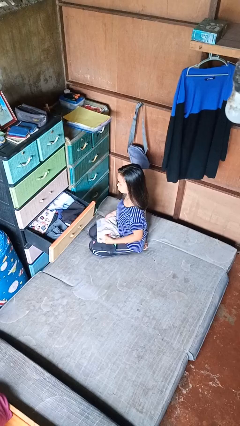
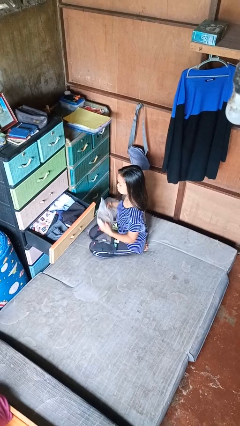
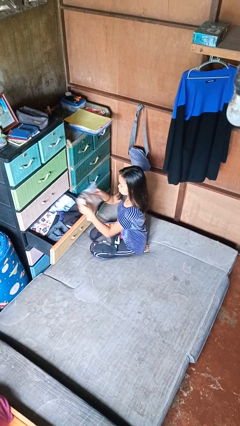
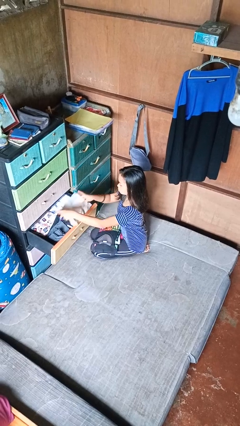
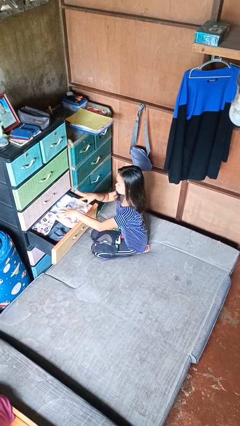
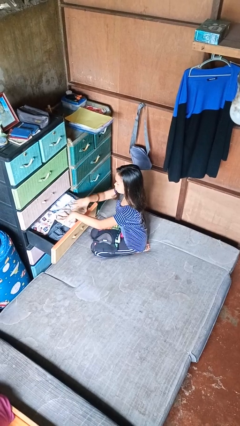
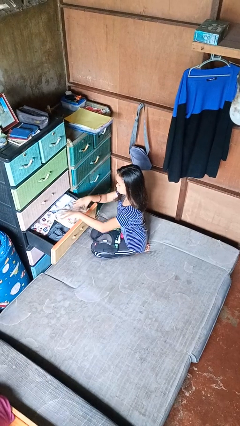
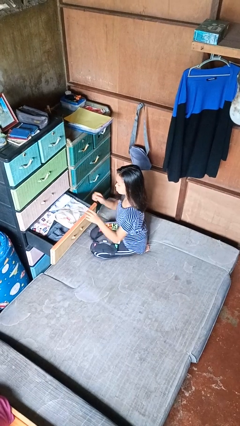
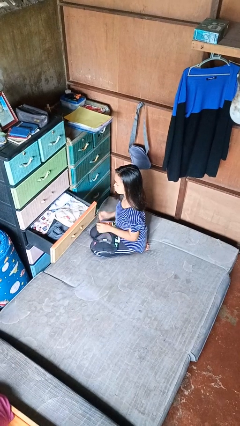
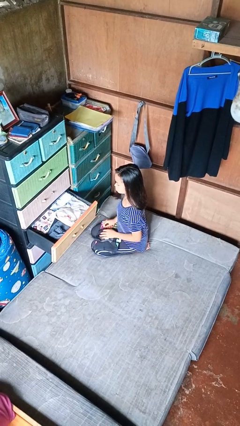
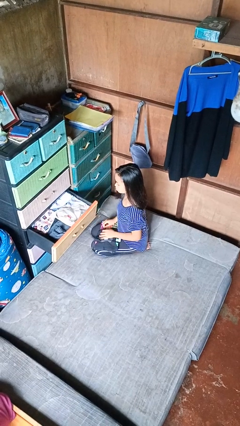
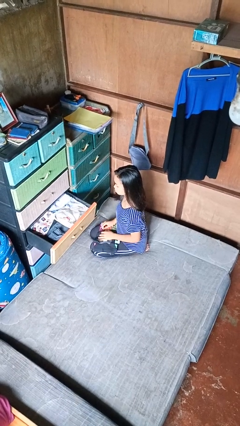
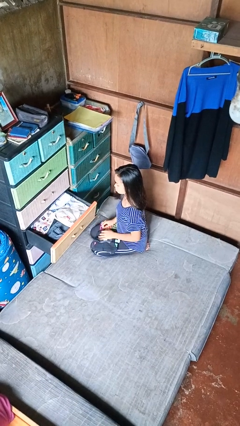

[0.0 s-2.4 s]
person puts clothes into dresser

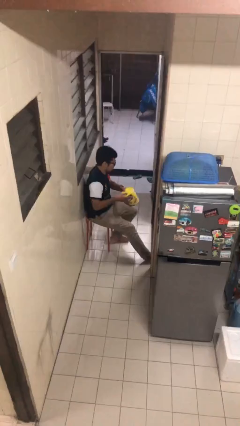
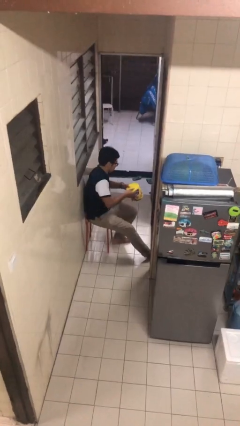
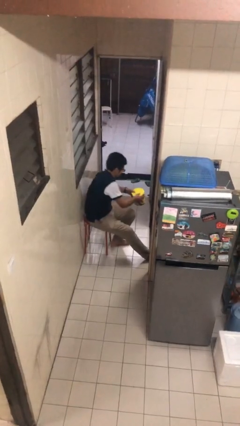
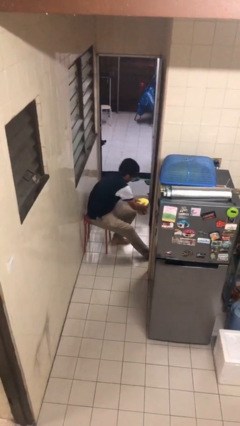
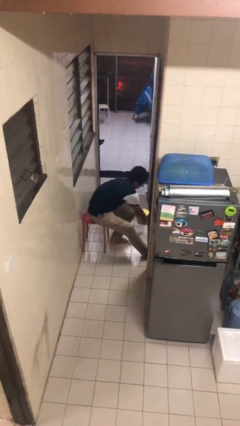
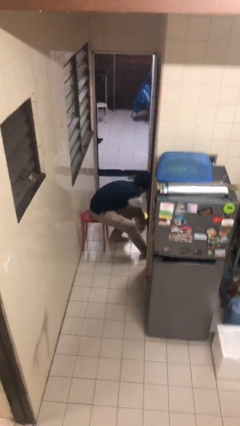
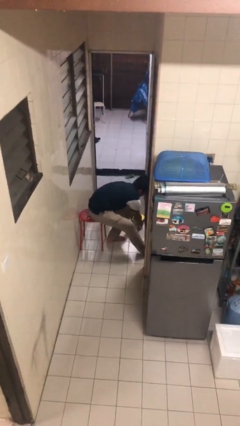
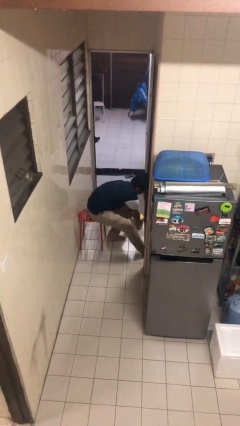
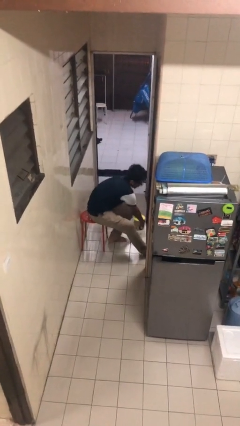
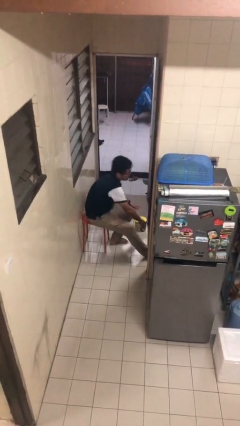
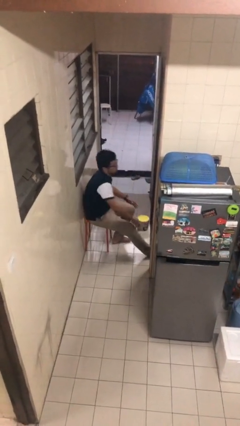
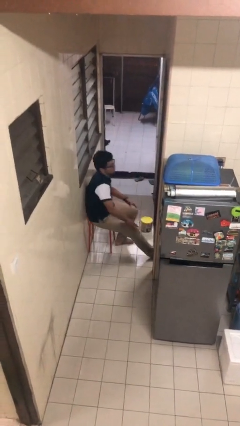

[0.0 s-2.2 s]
person puts down object on floor

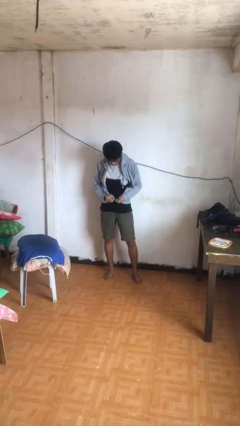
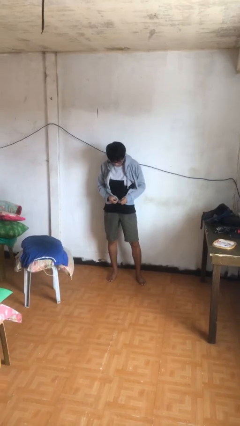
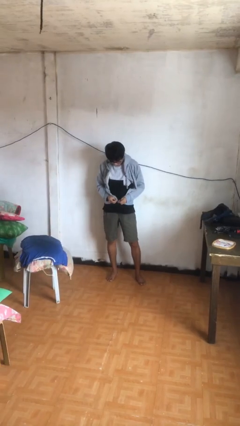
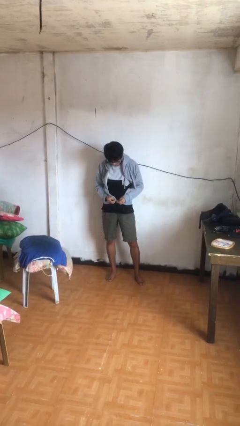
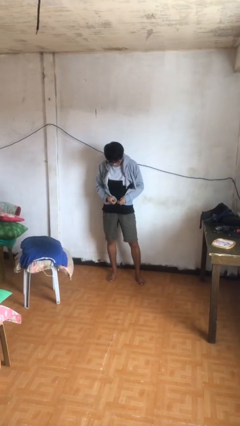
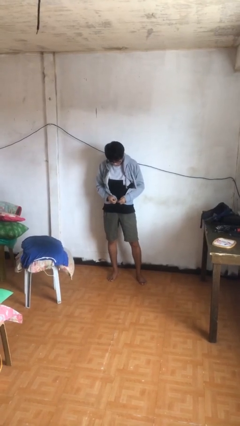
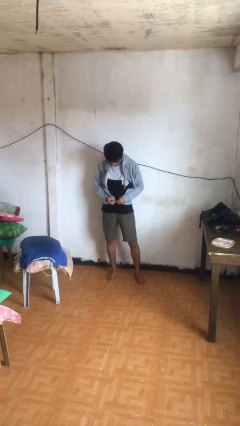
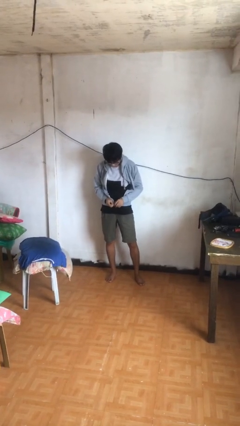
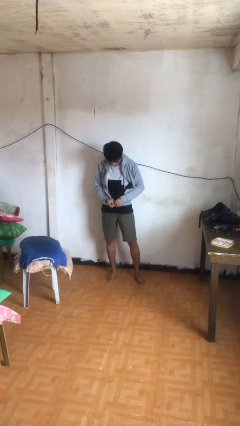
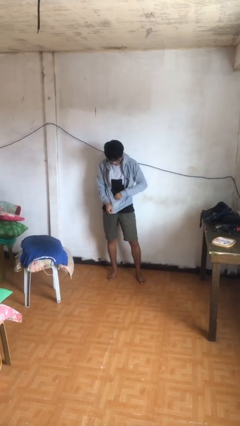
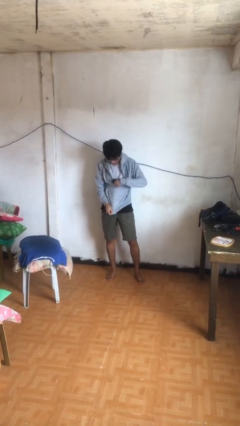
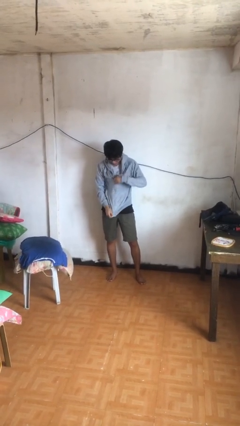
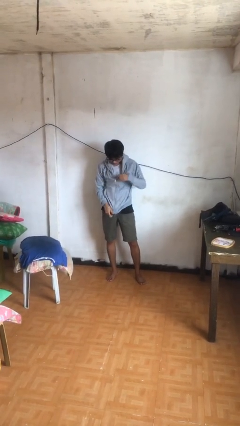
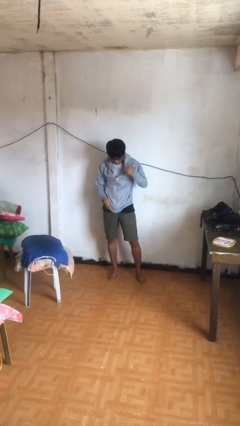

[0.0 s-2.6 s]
person zips up jacket

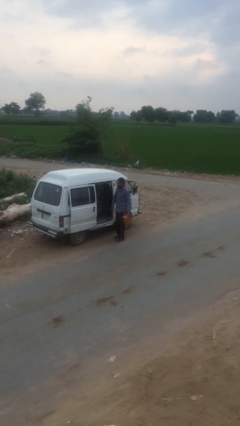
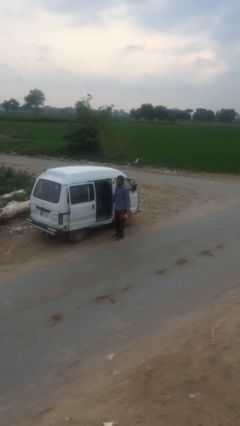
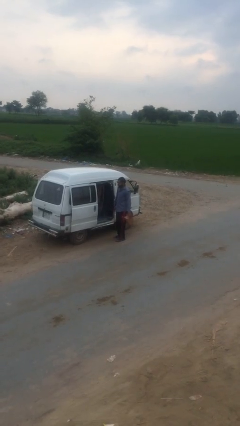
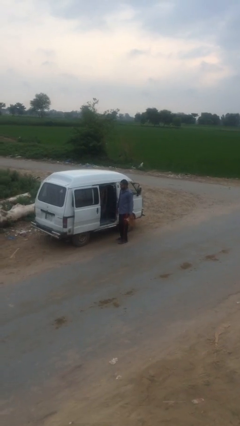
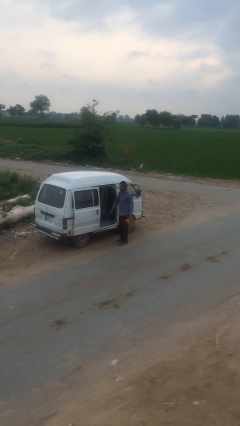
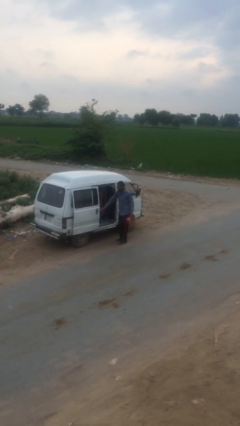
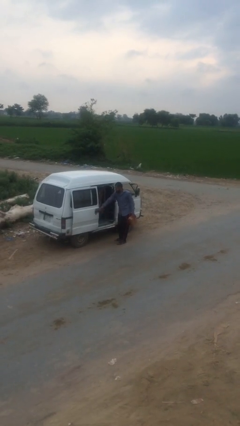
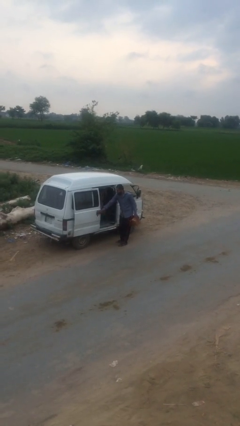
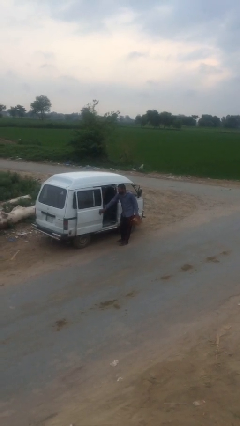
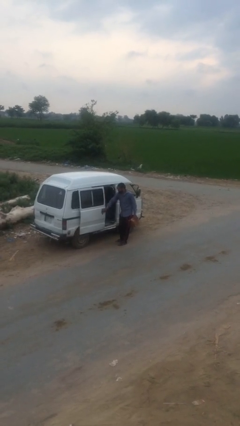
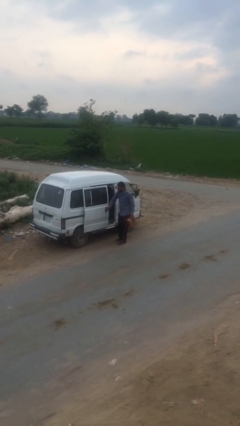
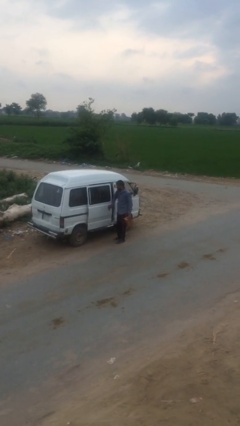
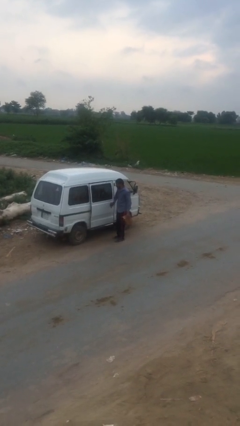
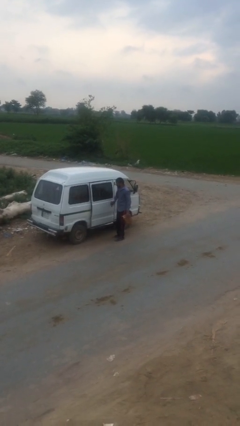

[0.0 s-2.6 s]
person closes car door

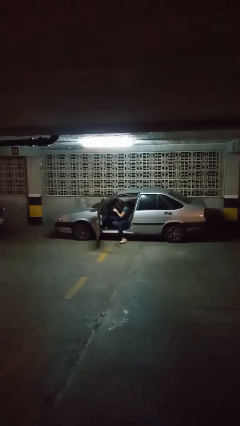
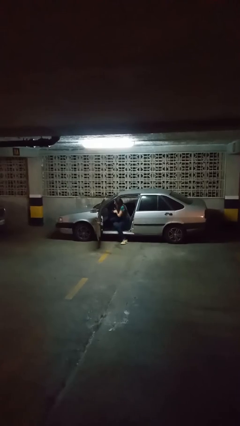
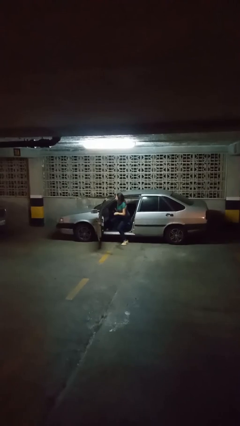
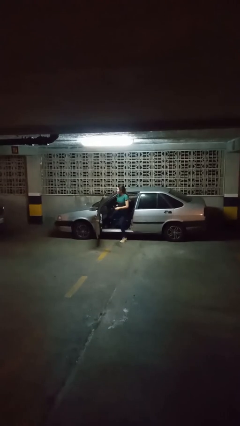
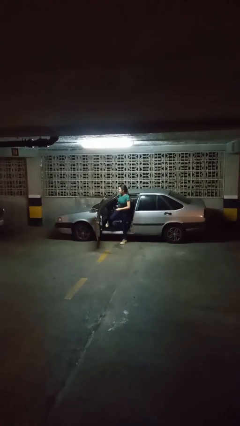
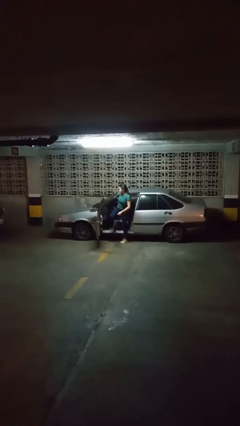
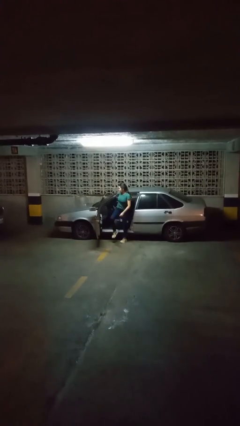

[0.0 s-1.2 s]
person exits car

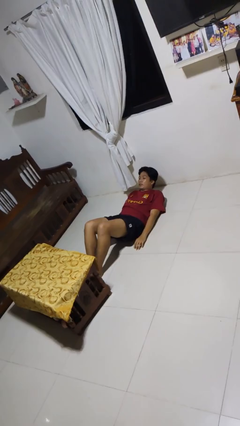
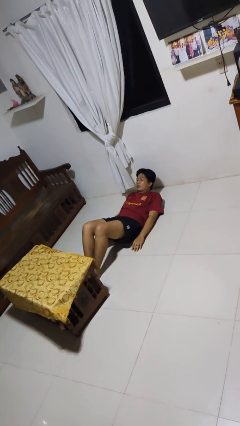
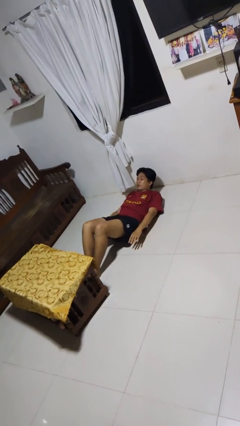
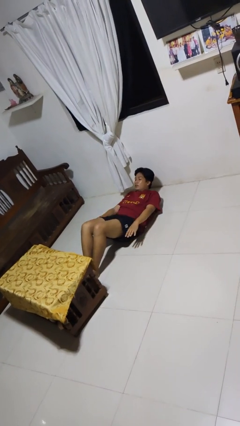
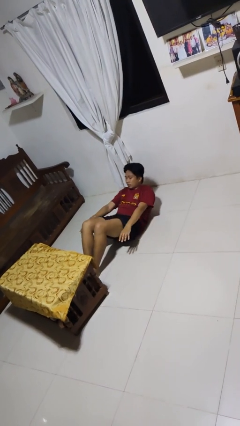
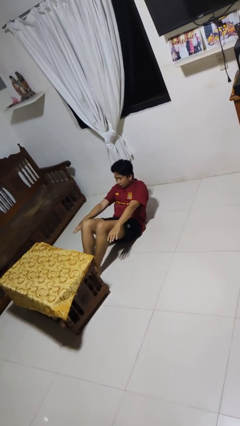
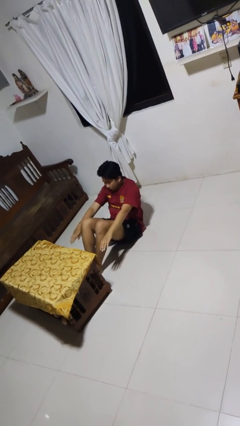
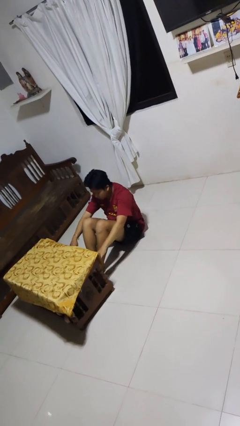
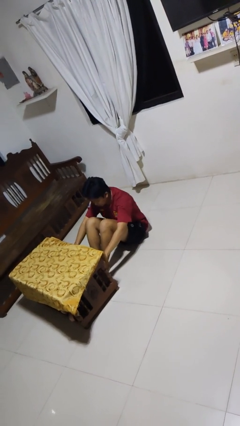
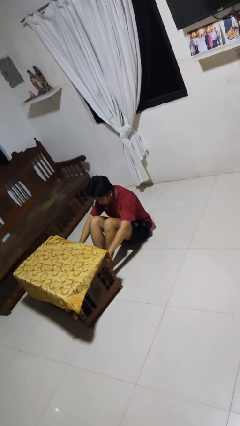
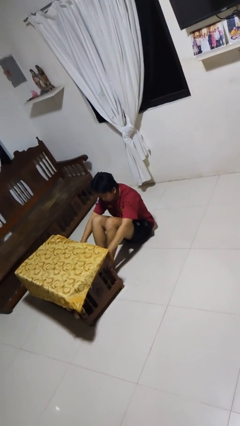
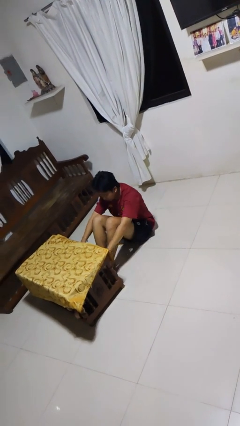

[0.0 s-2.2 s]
person exercises with situp

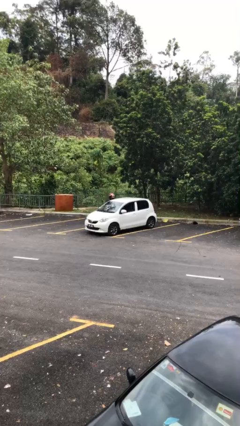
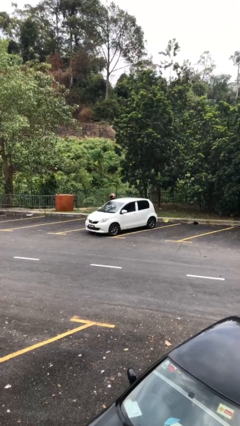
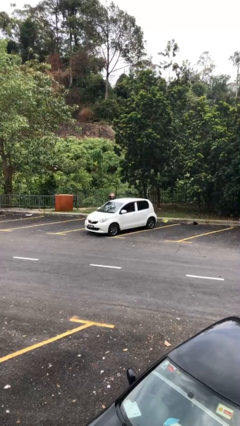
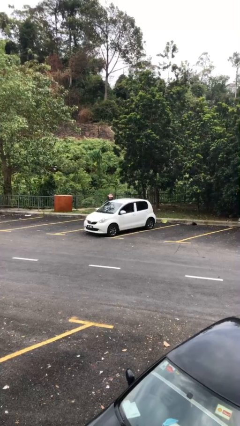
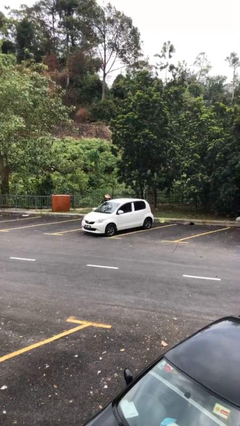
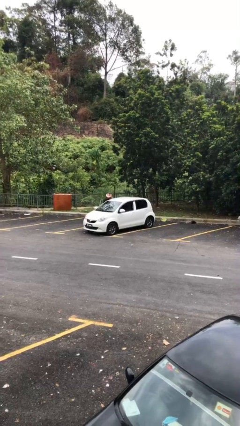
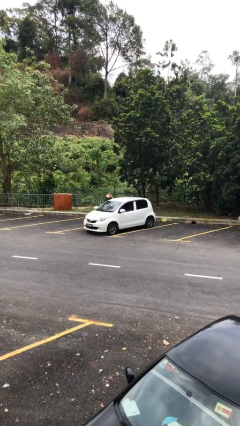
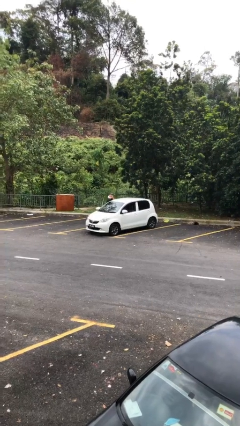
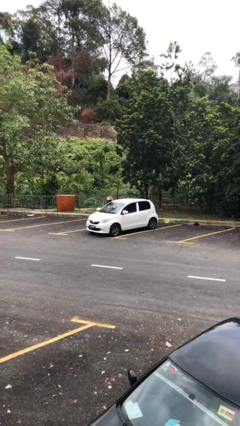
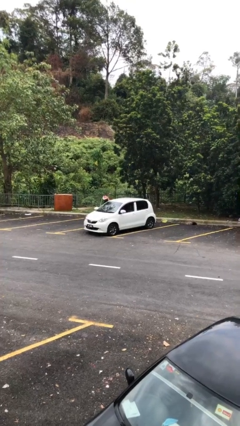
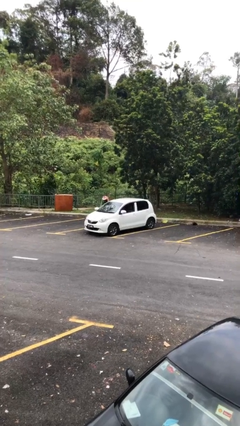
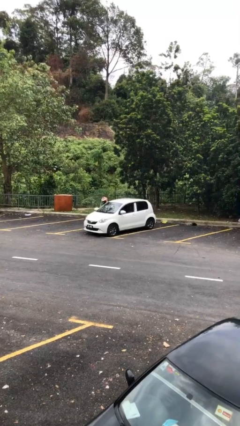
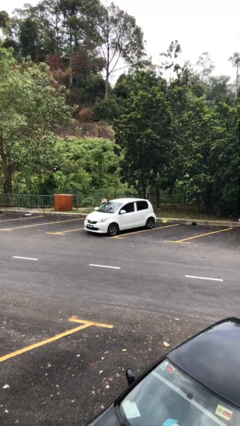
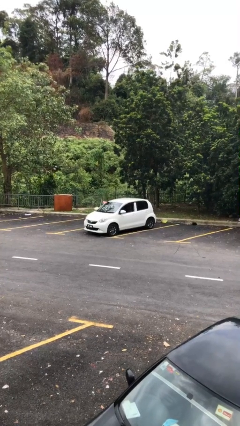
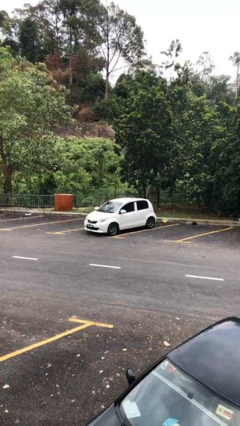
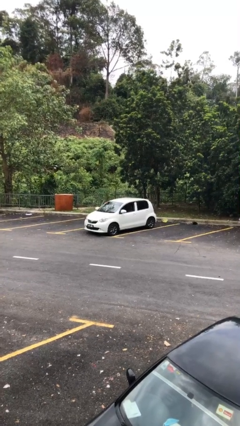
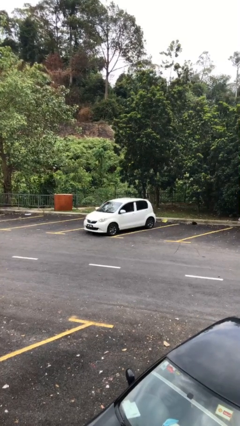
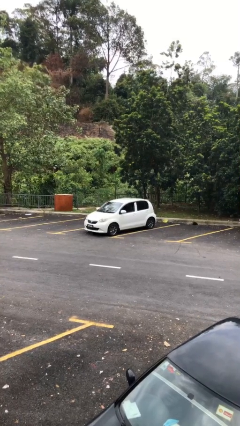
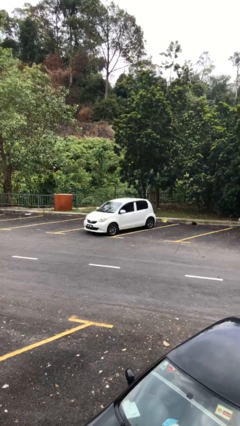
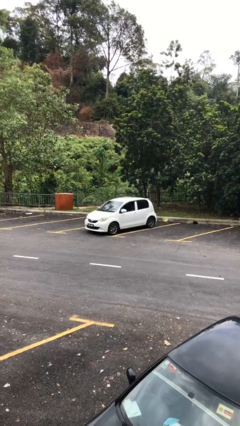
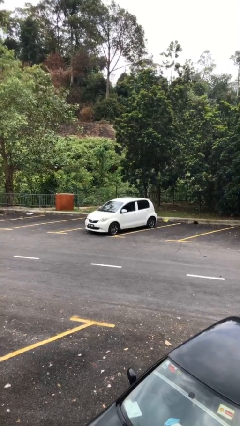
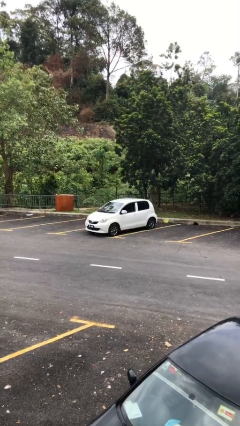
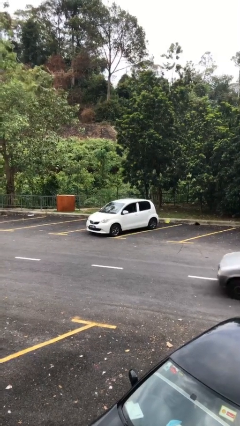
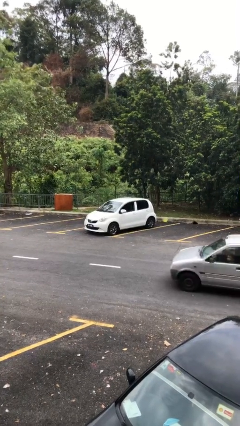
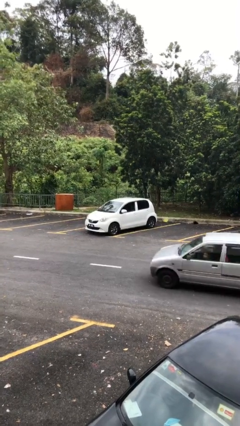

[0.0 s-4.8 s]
car picks up person
